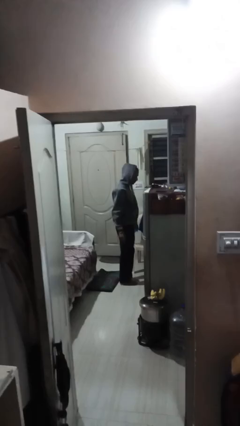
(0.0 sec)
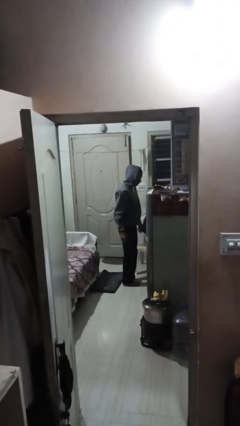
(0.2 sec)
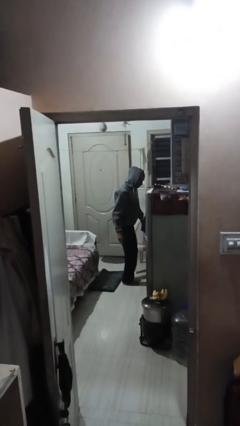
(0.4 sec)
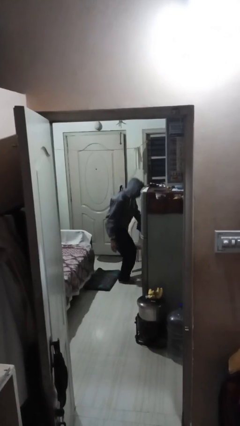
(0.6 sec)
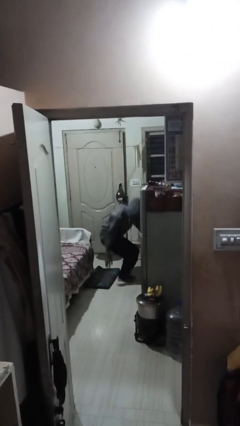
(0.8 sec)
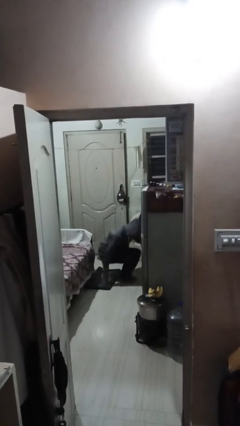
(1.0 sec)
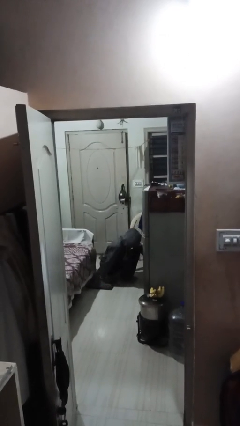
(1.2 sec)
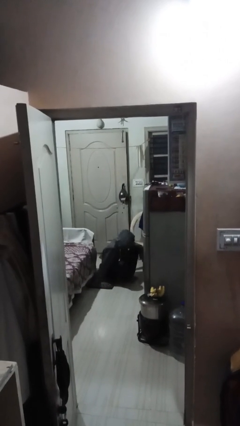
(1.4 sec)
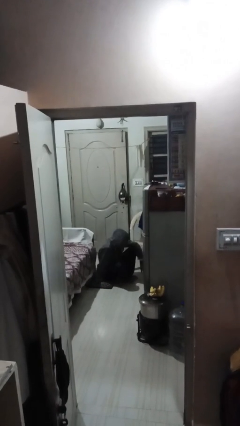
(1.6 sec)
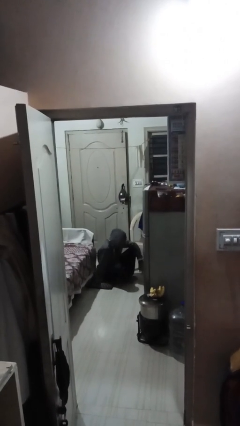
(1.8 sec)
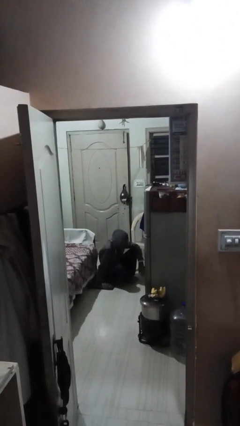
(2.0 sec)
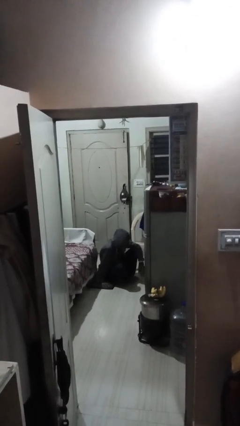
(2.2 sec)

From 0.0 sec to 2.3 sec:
person sits down

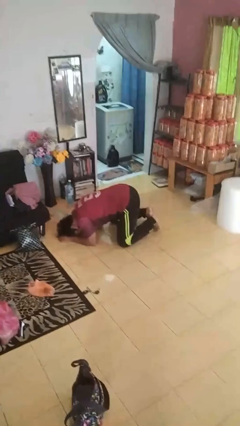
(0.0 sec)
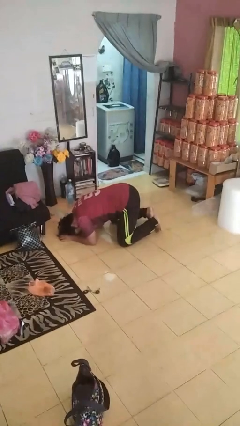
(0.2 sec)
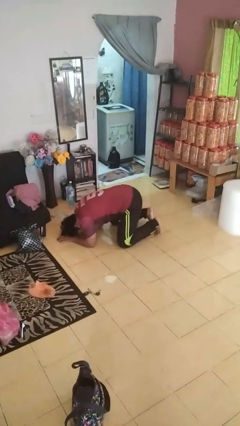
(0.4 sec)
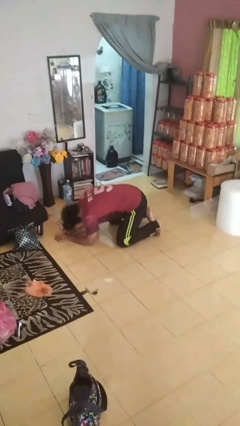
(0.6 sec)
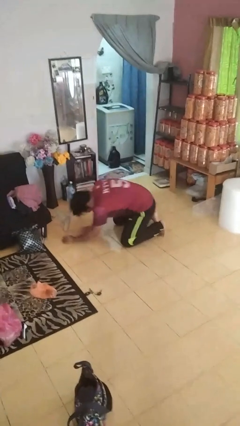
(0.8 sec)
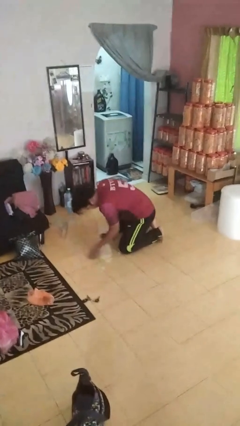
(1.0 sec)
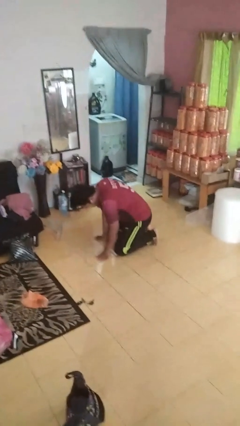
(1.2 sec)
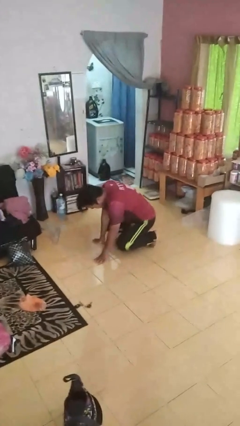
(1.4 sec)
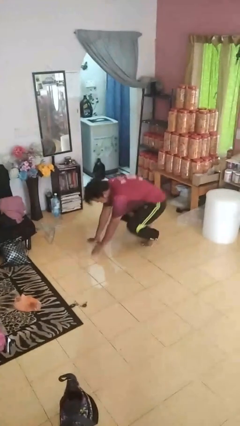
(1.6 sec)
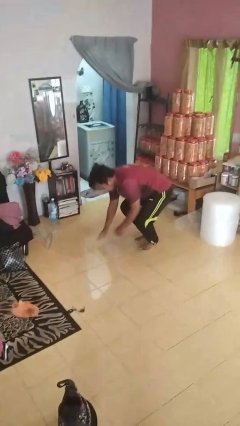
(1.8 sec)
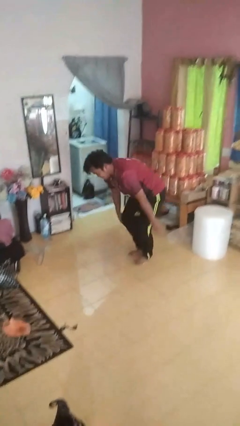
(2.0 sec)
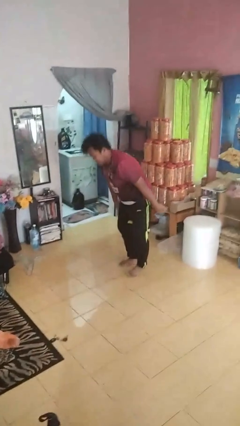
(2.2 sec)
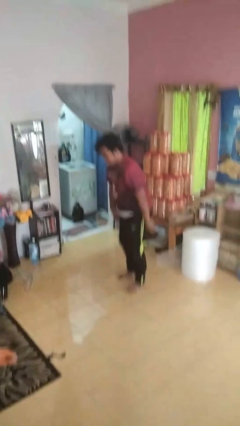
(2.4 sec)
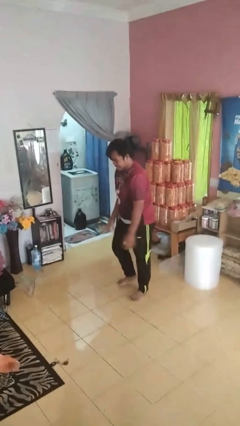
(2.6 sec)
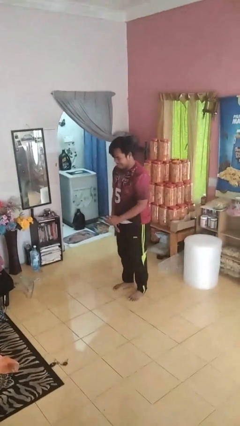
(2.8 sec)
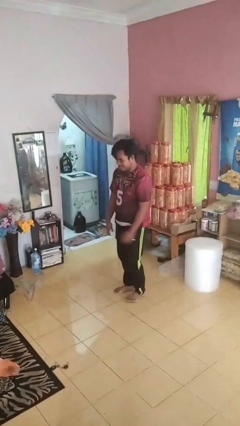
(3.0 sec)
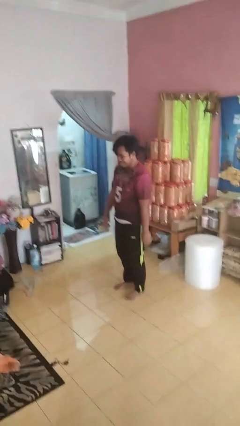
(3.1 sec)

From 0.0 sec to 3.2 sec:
person stands up from floor

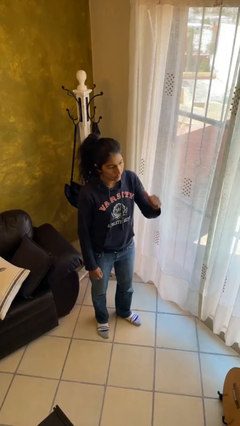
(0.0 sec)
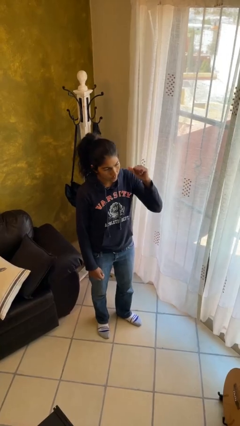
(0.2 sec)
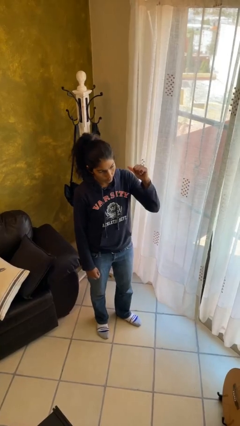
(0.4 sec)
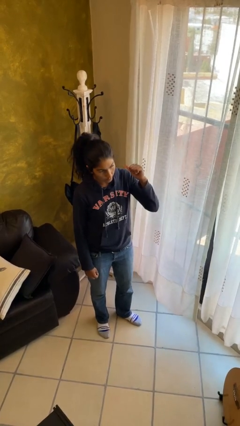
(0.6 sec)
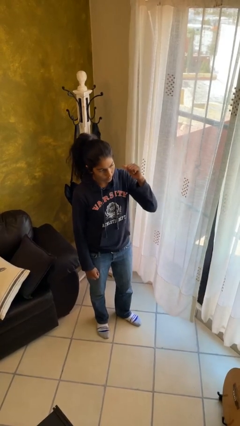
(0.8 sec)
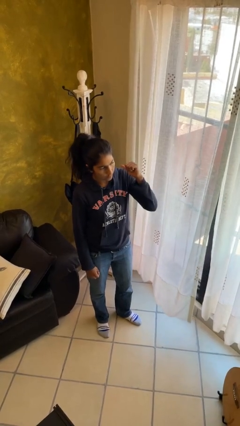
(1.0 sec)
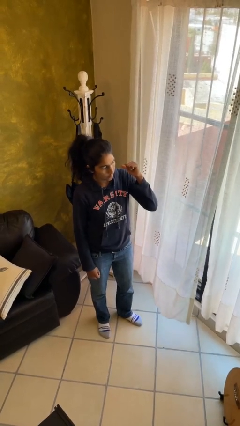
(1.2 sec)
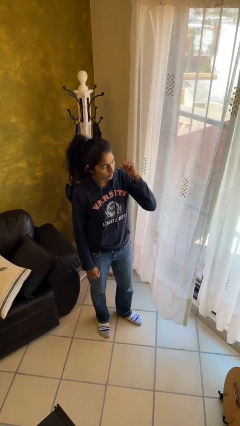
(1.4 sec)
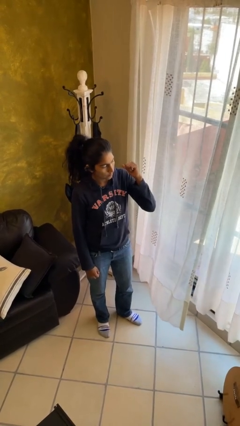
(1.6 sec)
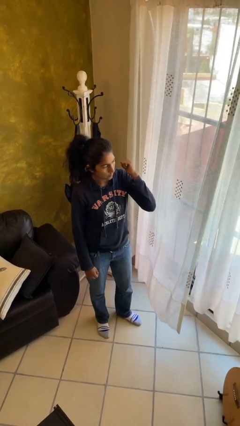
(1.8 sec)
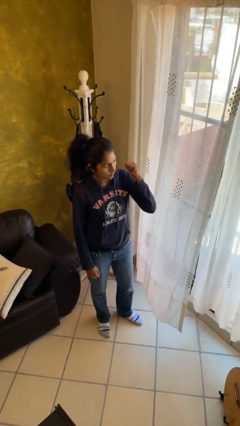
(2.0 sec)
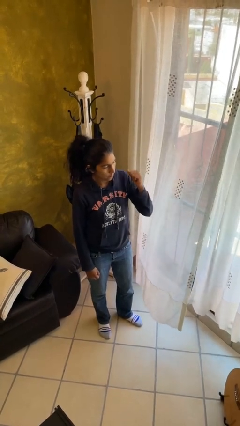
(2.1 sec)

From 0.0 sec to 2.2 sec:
person gestures behind me

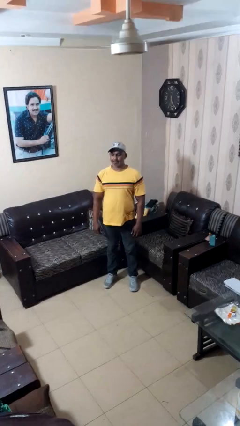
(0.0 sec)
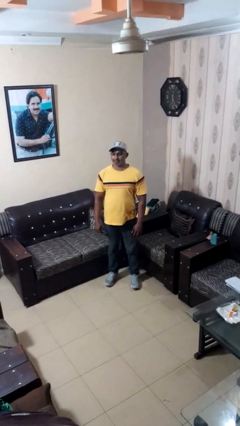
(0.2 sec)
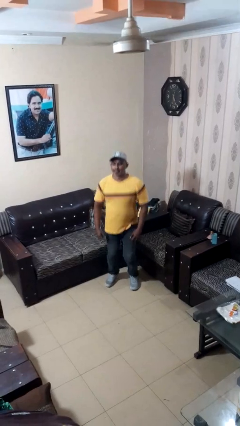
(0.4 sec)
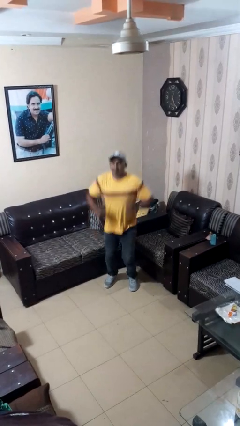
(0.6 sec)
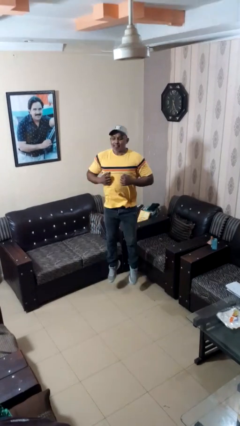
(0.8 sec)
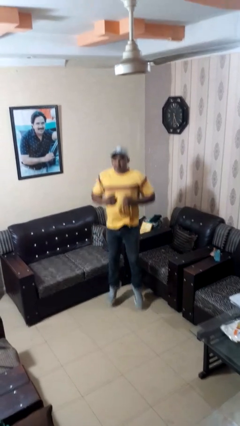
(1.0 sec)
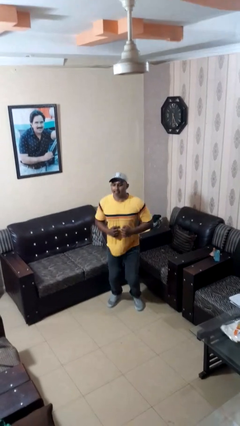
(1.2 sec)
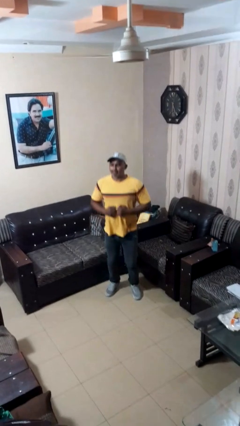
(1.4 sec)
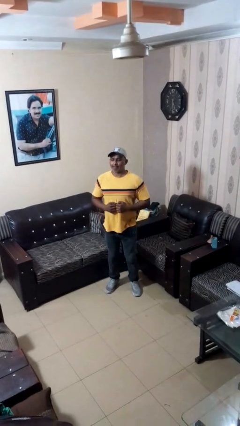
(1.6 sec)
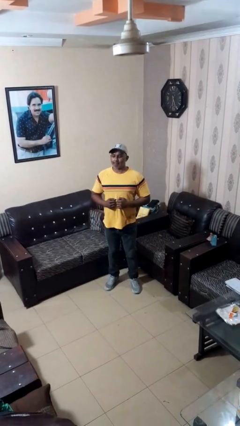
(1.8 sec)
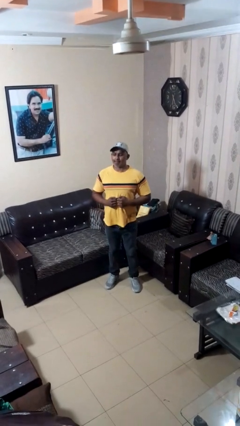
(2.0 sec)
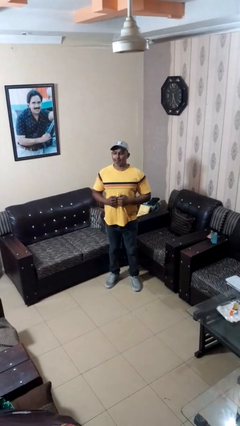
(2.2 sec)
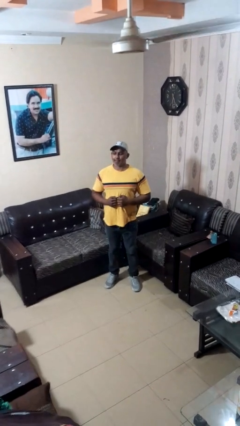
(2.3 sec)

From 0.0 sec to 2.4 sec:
person jumps

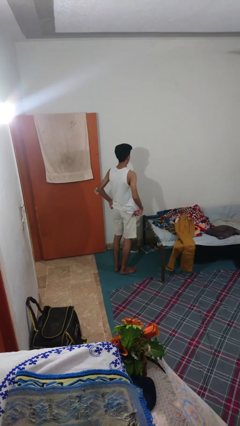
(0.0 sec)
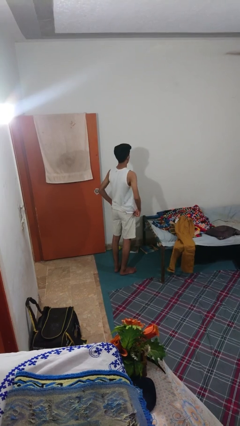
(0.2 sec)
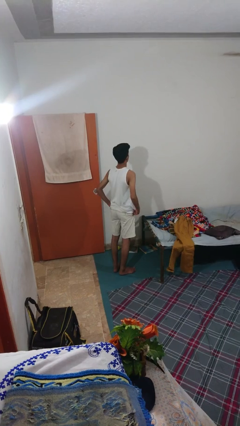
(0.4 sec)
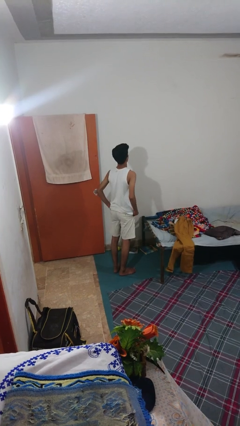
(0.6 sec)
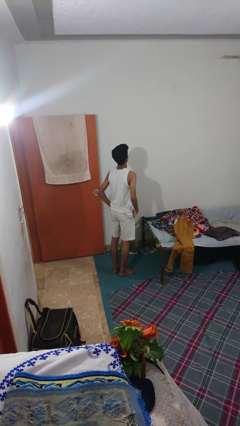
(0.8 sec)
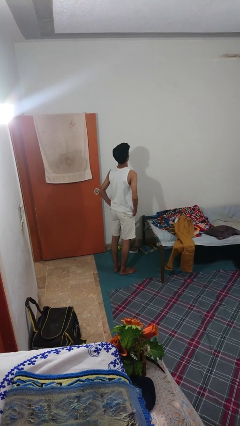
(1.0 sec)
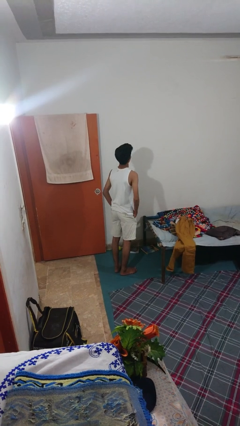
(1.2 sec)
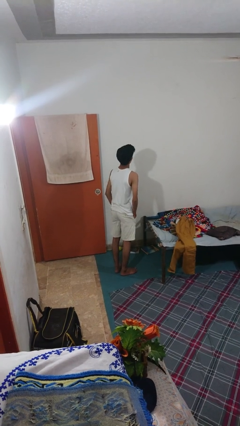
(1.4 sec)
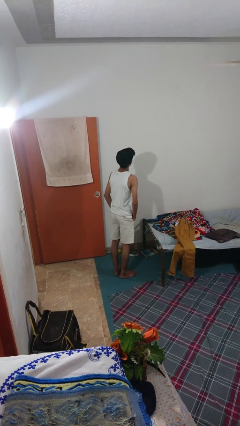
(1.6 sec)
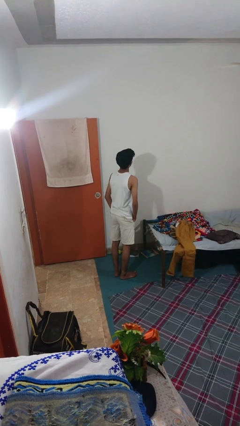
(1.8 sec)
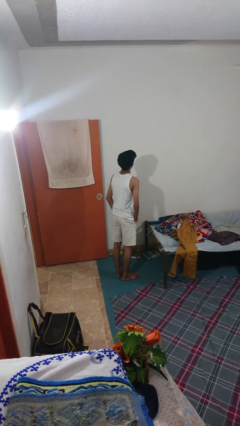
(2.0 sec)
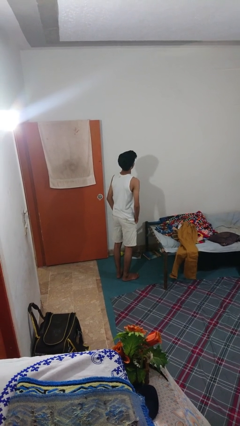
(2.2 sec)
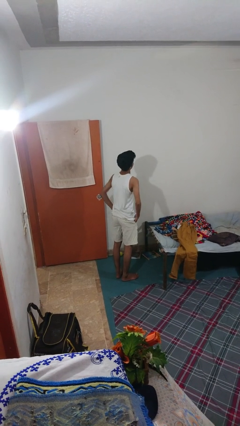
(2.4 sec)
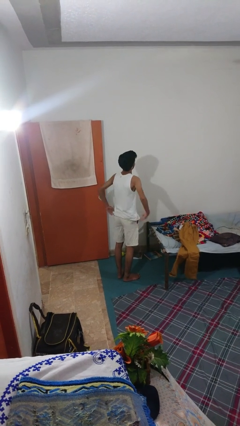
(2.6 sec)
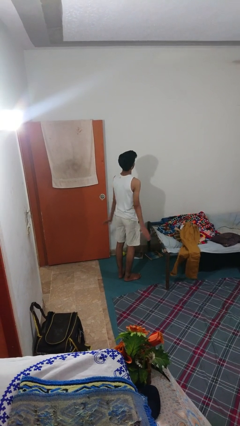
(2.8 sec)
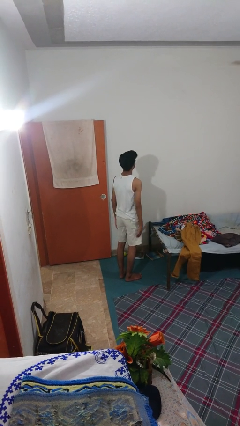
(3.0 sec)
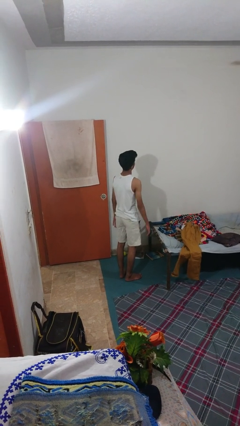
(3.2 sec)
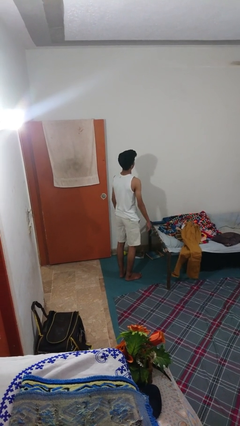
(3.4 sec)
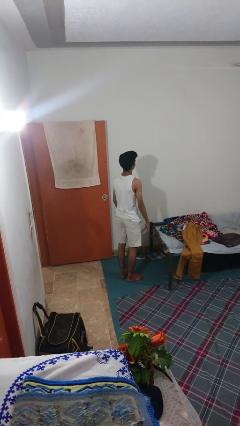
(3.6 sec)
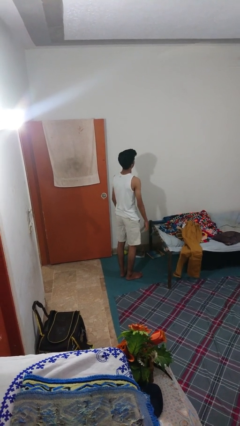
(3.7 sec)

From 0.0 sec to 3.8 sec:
person puts hands in back pockets

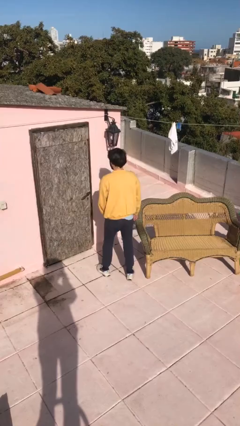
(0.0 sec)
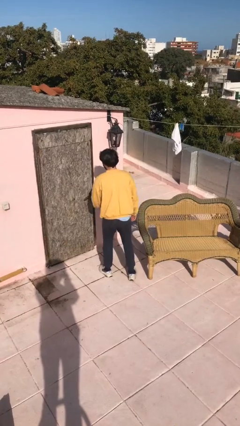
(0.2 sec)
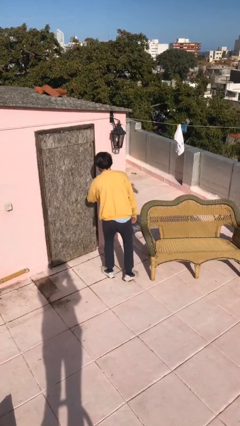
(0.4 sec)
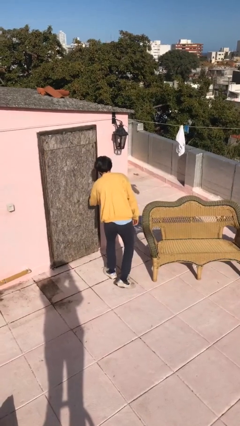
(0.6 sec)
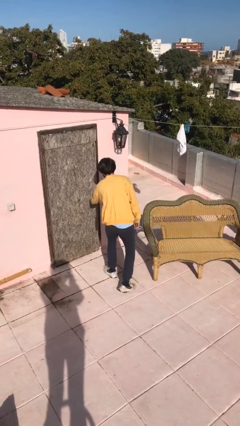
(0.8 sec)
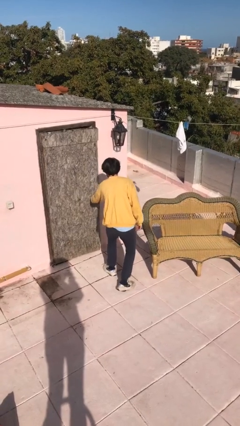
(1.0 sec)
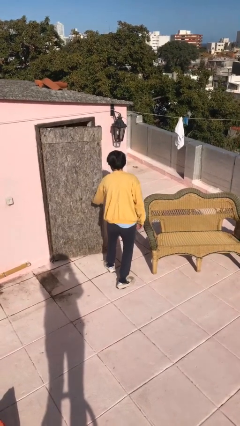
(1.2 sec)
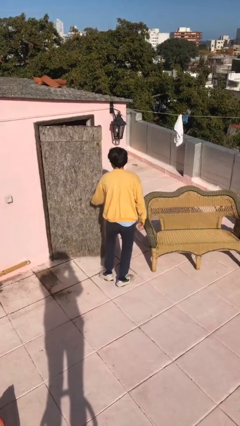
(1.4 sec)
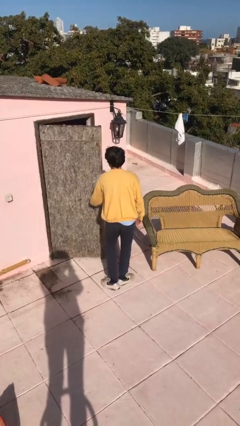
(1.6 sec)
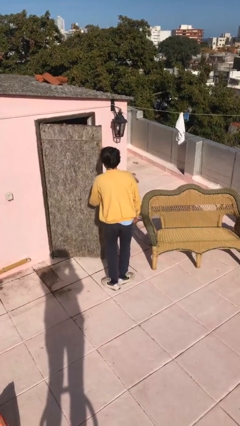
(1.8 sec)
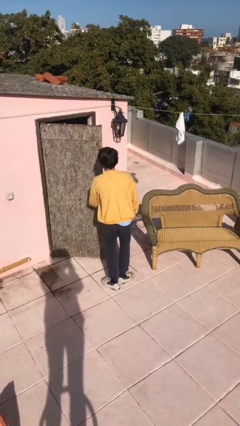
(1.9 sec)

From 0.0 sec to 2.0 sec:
person opens facility door

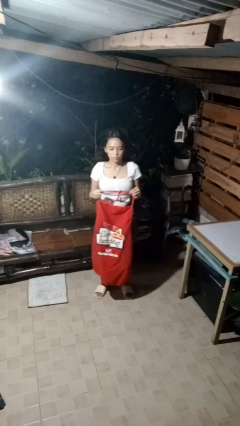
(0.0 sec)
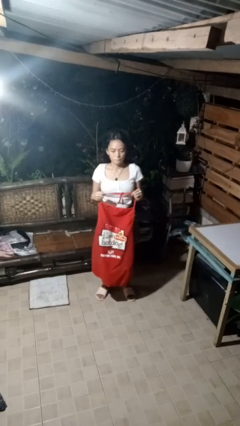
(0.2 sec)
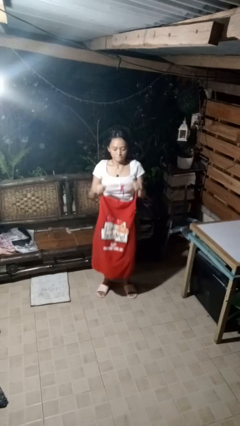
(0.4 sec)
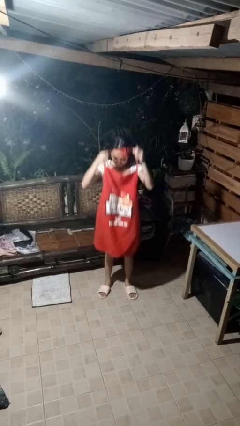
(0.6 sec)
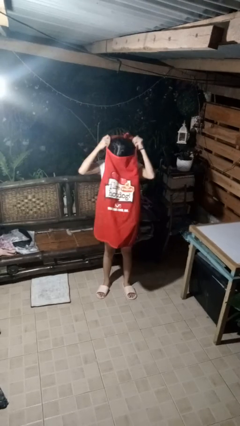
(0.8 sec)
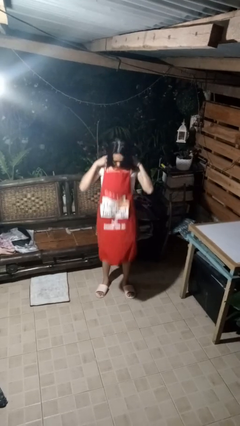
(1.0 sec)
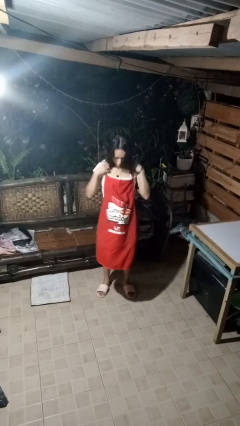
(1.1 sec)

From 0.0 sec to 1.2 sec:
person puts on apron

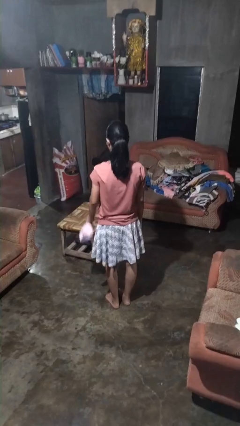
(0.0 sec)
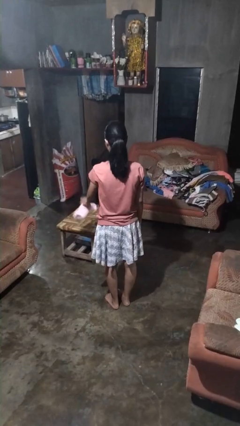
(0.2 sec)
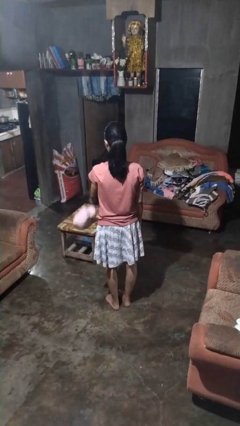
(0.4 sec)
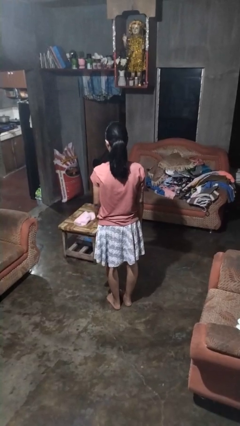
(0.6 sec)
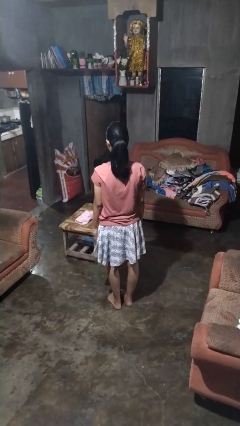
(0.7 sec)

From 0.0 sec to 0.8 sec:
person throws object on table
